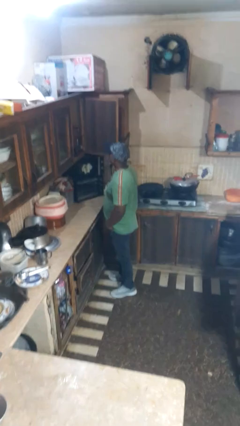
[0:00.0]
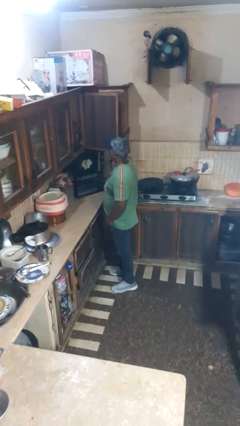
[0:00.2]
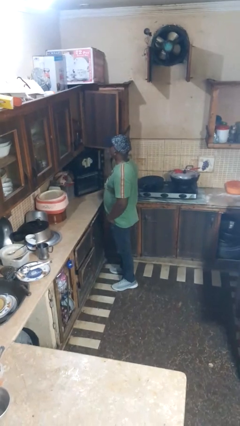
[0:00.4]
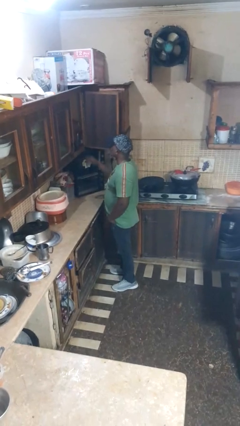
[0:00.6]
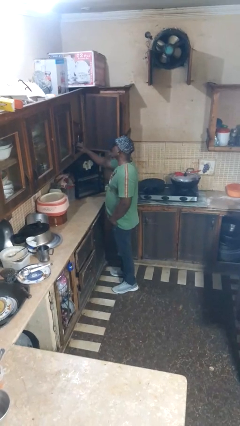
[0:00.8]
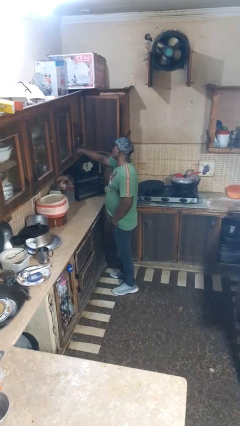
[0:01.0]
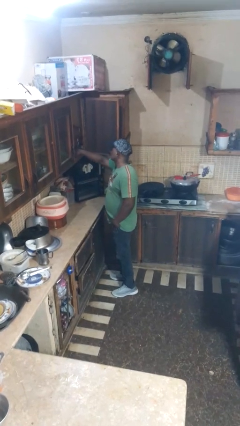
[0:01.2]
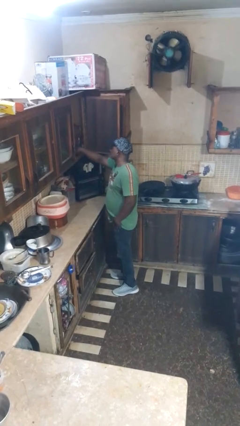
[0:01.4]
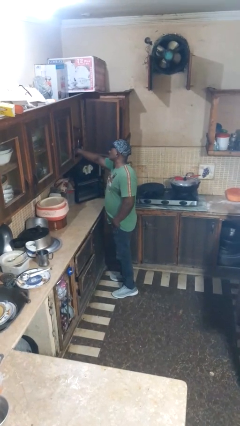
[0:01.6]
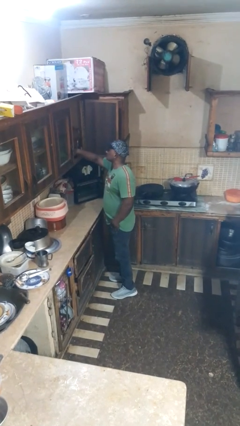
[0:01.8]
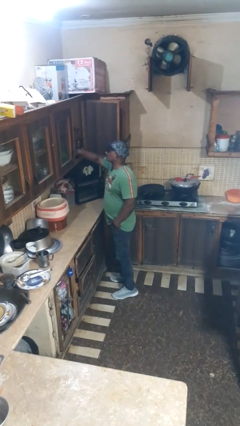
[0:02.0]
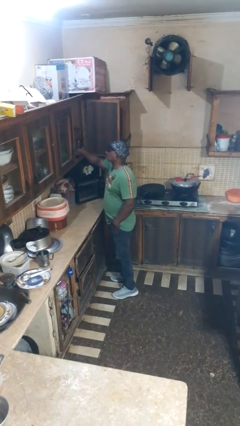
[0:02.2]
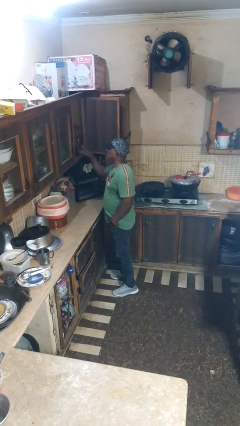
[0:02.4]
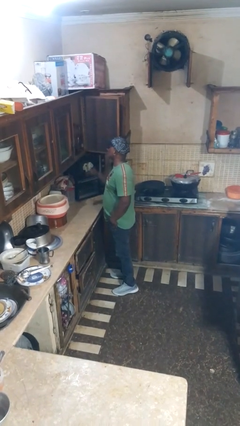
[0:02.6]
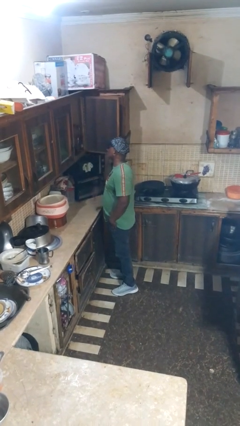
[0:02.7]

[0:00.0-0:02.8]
person searches in cabinet

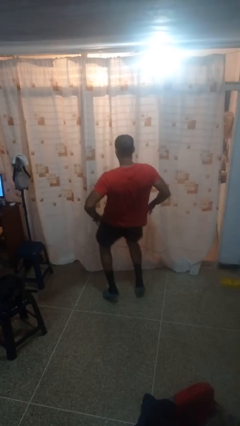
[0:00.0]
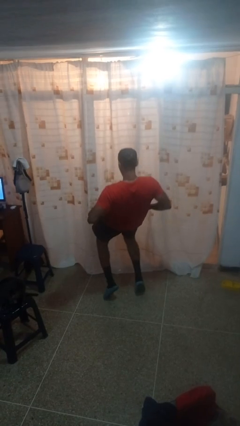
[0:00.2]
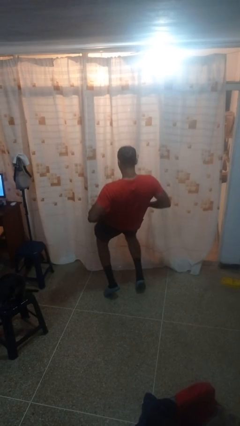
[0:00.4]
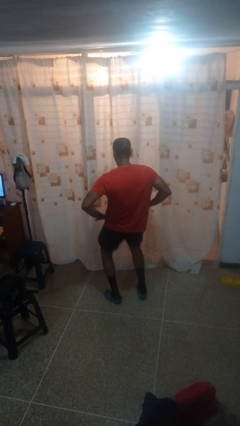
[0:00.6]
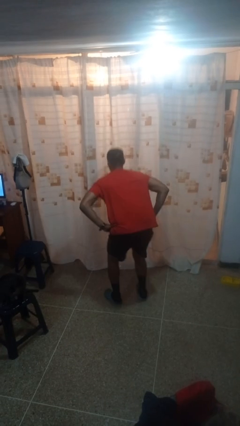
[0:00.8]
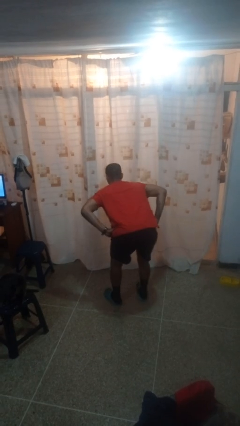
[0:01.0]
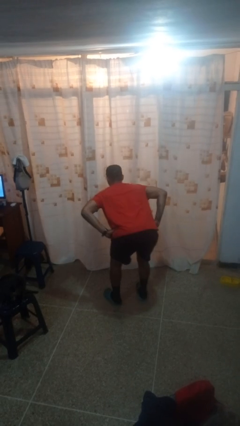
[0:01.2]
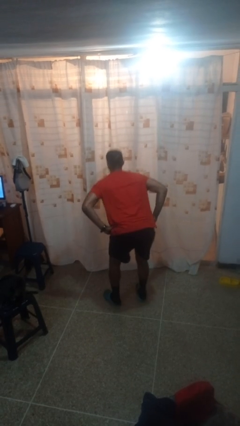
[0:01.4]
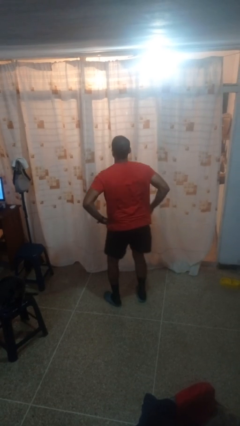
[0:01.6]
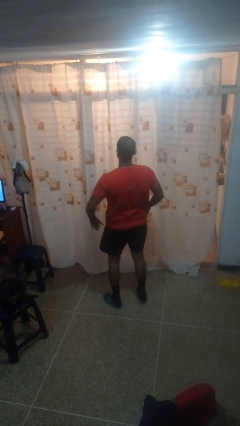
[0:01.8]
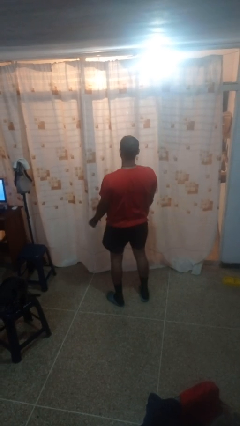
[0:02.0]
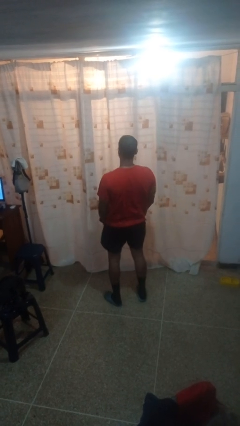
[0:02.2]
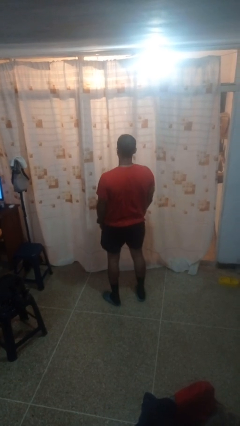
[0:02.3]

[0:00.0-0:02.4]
person wiggles hips

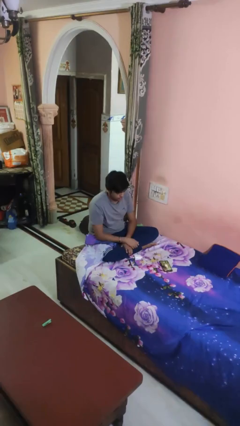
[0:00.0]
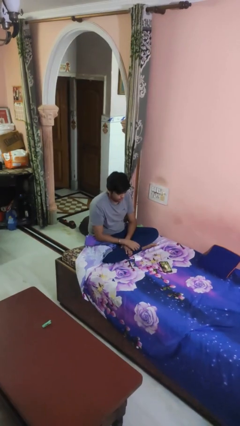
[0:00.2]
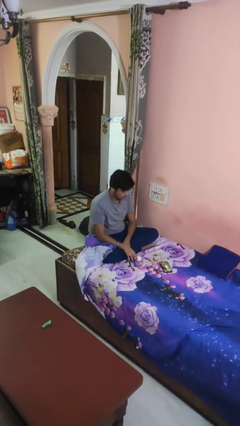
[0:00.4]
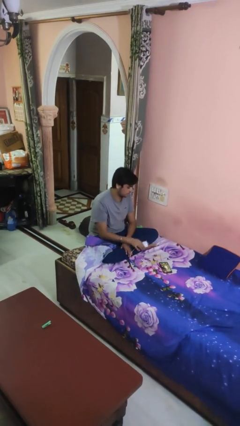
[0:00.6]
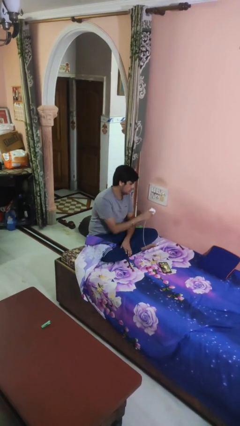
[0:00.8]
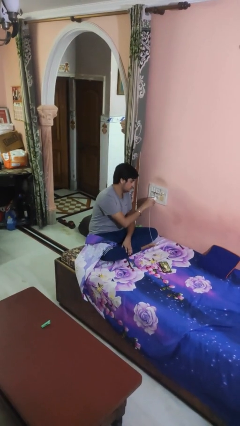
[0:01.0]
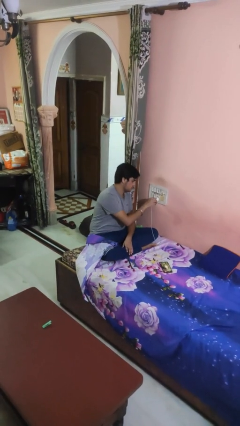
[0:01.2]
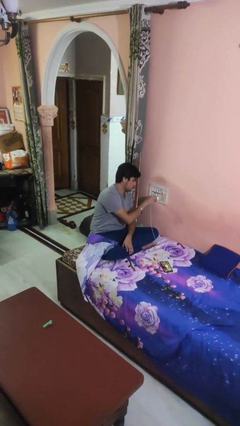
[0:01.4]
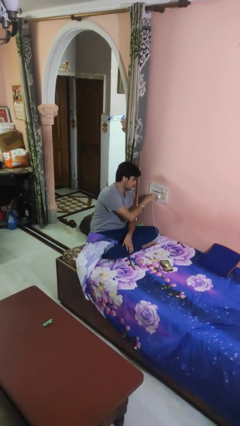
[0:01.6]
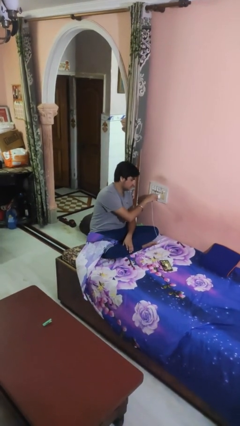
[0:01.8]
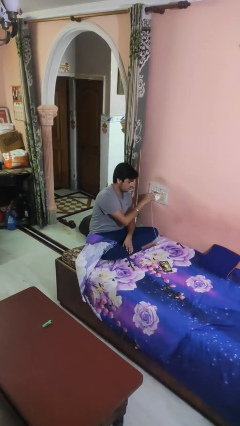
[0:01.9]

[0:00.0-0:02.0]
person plugs into electrical socket

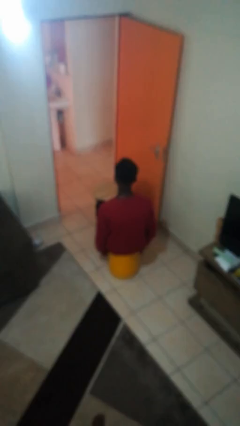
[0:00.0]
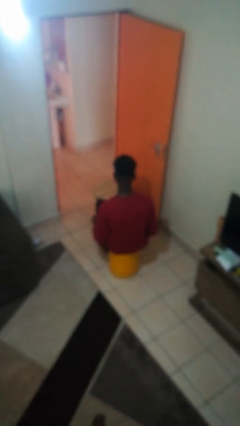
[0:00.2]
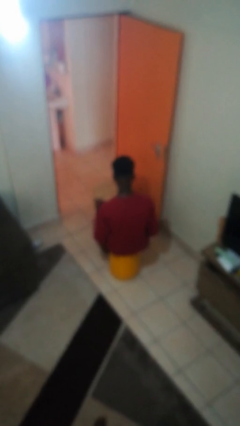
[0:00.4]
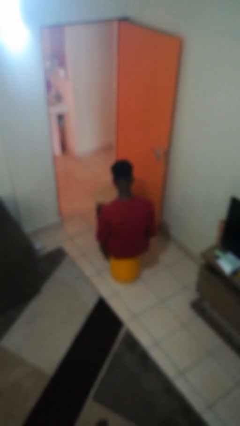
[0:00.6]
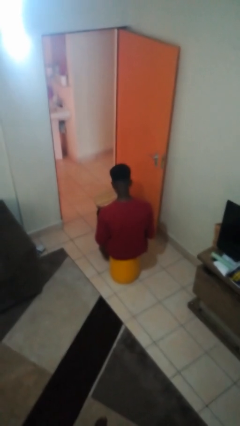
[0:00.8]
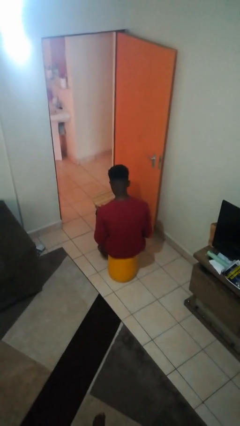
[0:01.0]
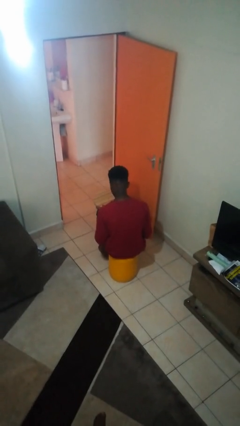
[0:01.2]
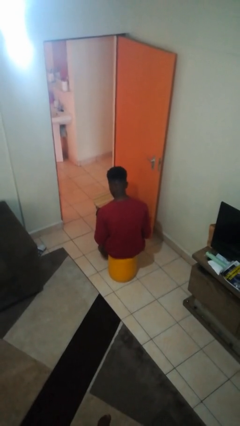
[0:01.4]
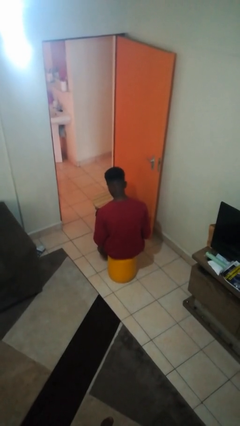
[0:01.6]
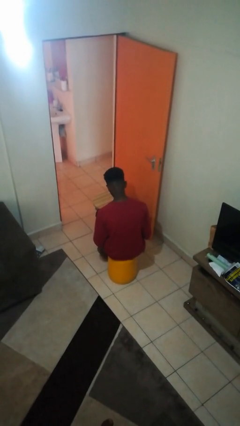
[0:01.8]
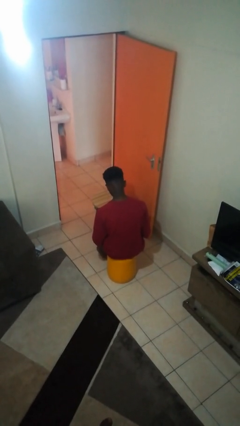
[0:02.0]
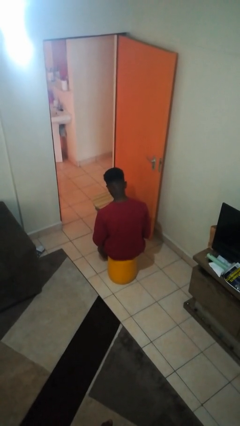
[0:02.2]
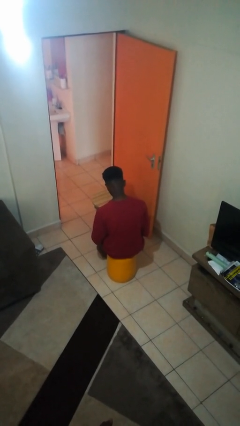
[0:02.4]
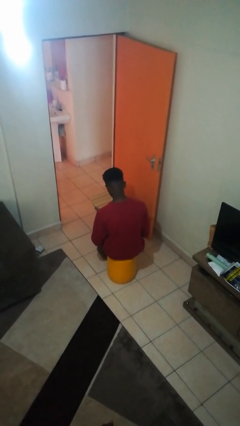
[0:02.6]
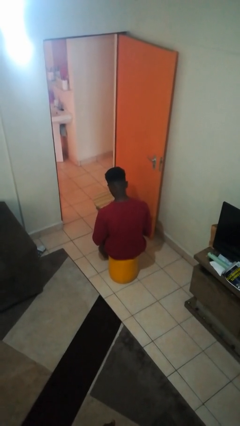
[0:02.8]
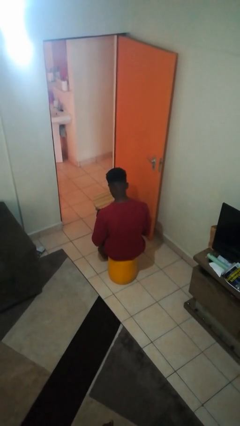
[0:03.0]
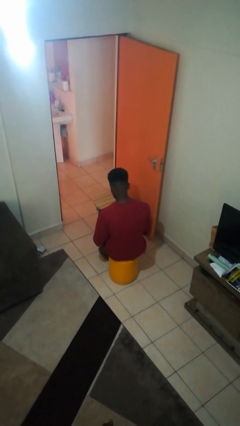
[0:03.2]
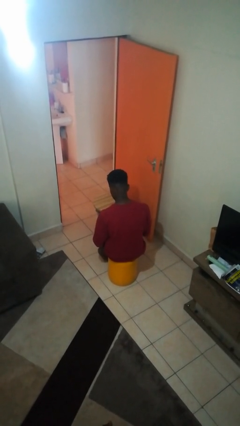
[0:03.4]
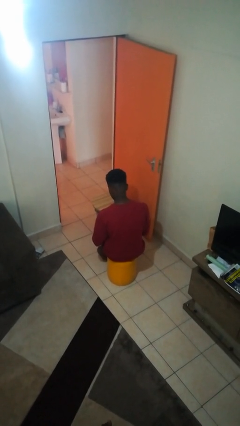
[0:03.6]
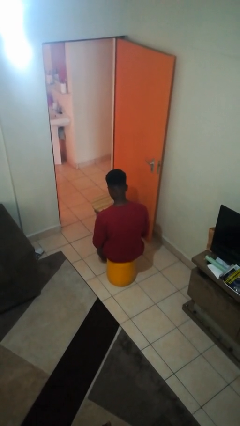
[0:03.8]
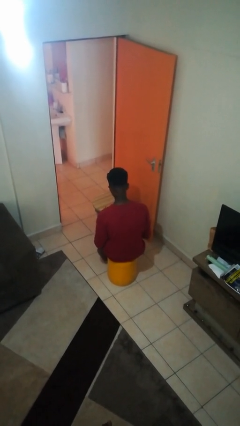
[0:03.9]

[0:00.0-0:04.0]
person looks at hands in lap

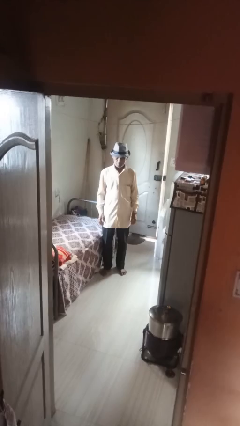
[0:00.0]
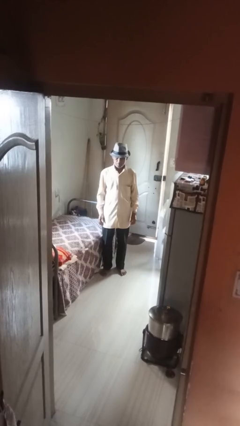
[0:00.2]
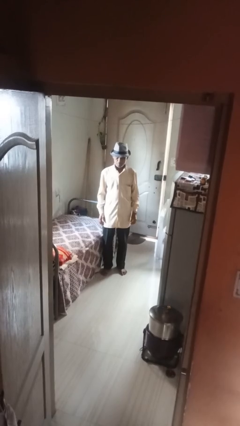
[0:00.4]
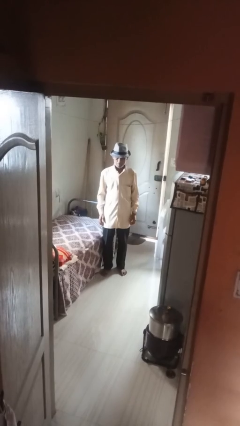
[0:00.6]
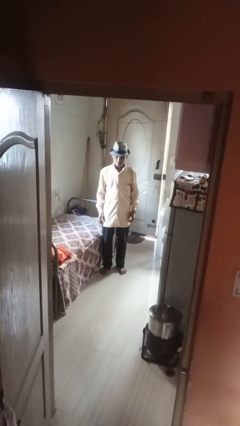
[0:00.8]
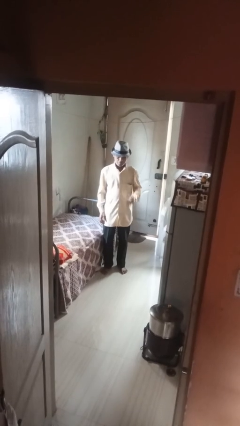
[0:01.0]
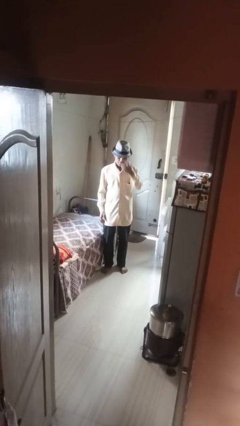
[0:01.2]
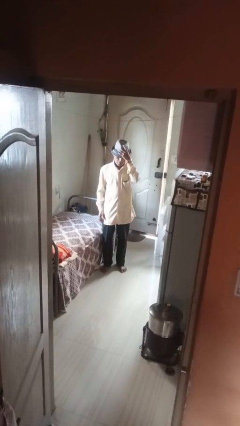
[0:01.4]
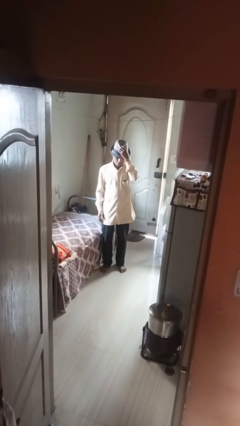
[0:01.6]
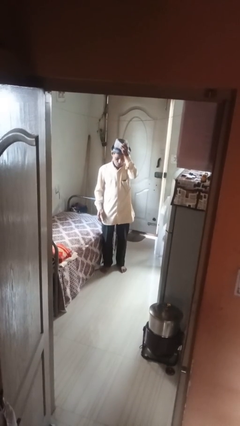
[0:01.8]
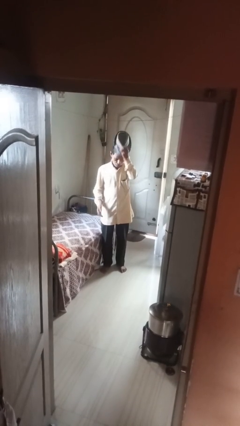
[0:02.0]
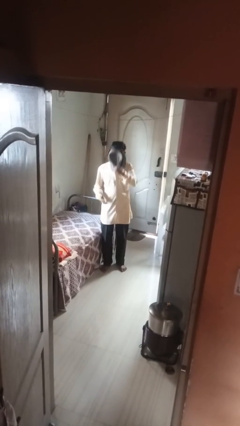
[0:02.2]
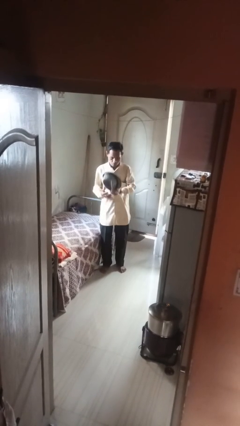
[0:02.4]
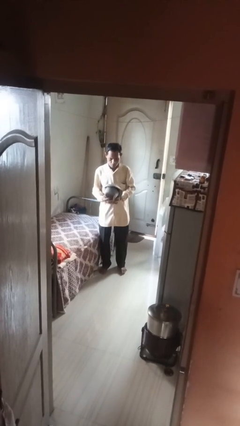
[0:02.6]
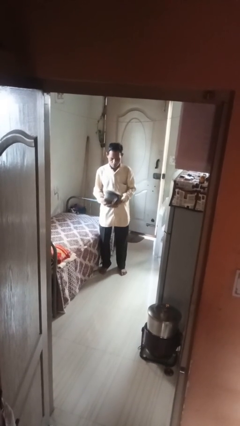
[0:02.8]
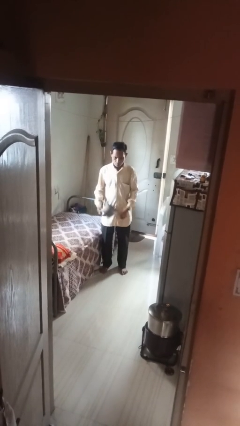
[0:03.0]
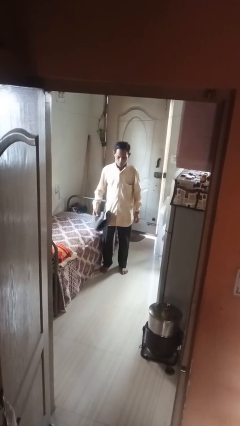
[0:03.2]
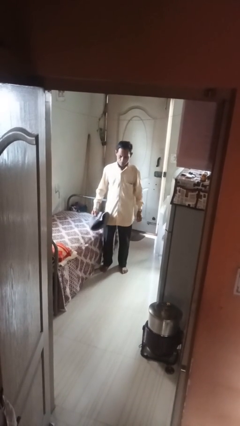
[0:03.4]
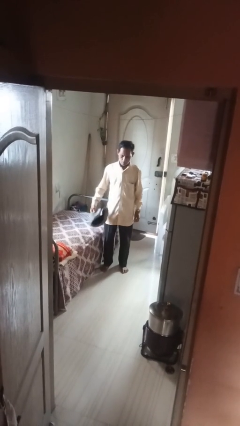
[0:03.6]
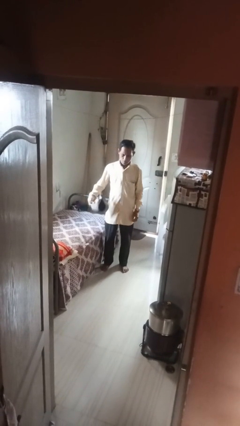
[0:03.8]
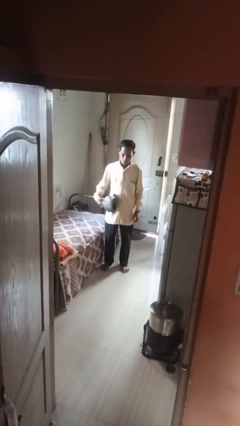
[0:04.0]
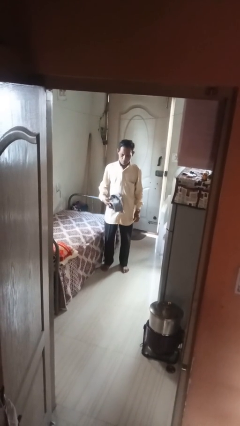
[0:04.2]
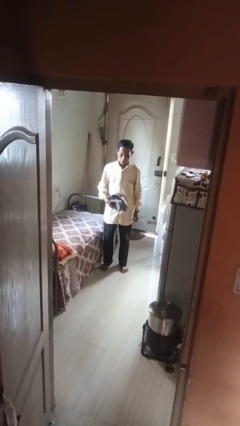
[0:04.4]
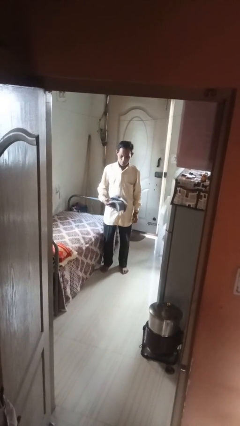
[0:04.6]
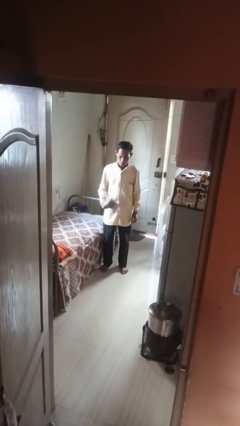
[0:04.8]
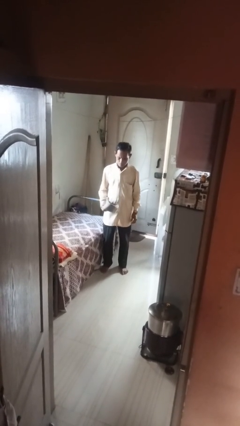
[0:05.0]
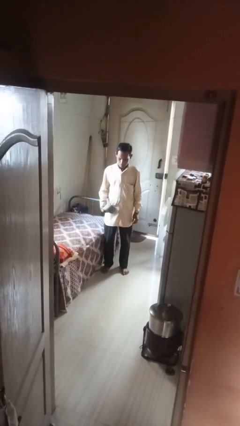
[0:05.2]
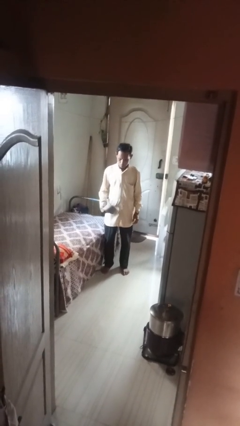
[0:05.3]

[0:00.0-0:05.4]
person takes off hat

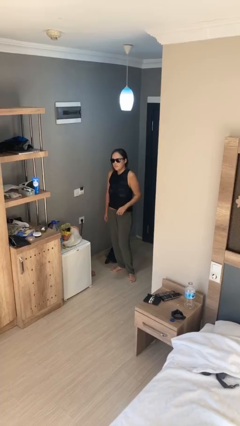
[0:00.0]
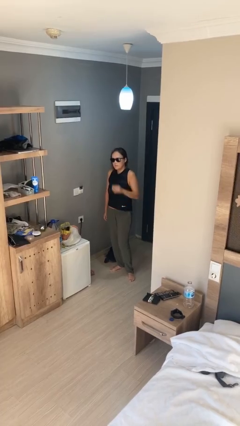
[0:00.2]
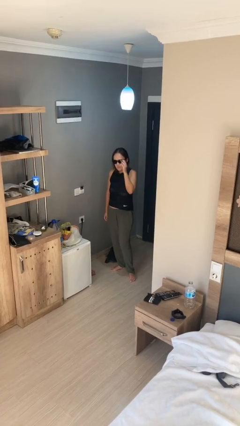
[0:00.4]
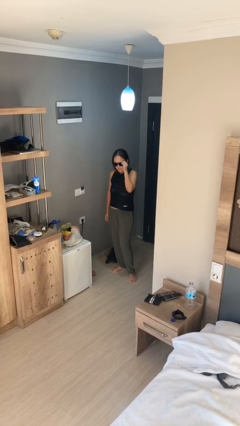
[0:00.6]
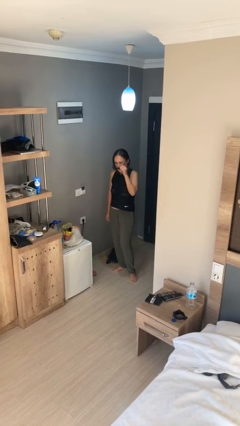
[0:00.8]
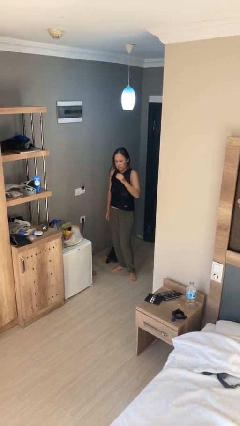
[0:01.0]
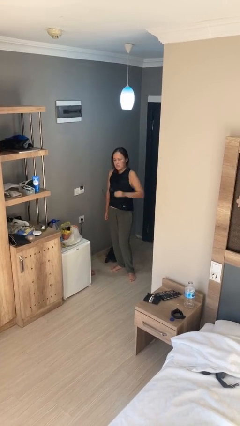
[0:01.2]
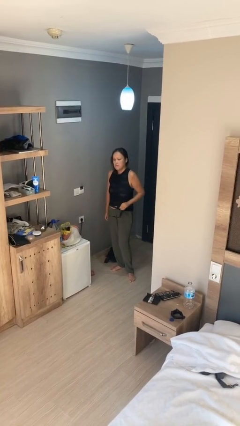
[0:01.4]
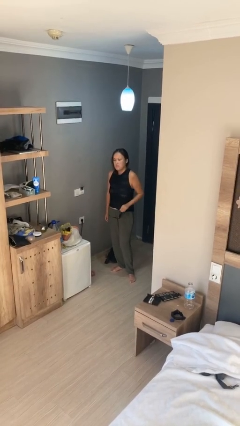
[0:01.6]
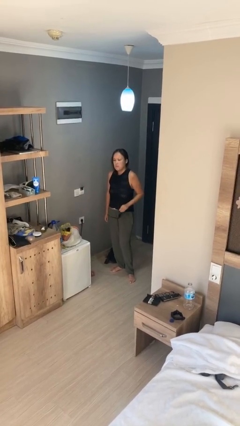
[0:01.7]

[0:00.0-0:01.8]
person takes off sunglasses
